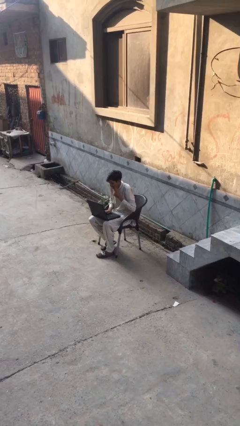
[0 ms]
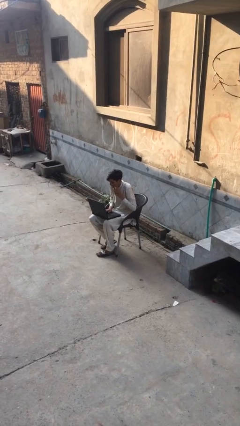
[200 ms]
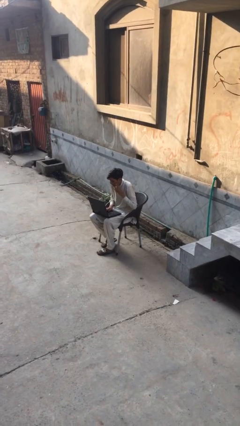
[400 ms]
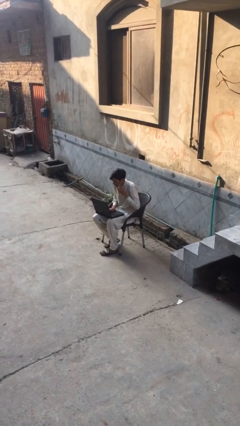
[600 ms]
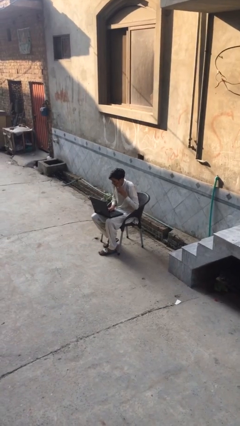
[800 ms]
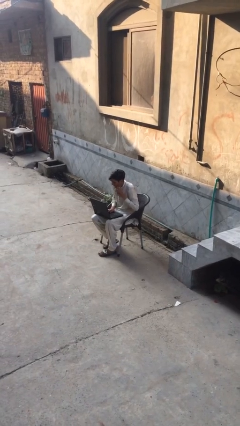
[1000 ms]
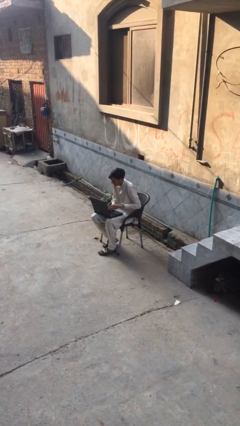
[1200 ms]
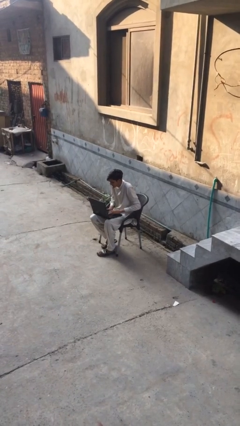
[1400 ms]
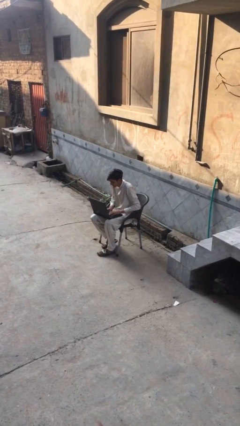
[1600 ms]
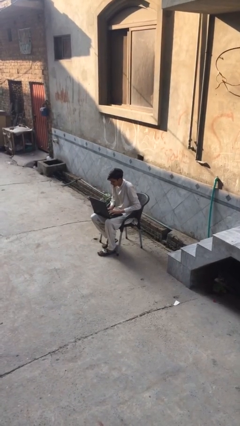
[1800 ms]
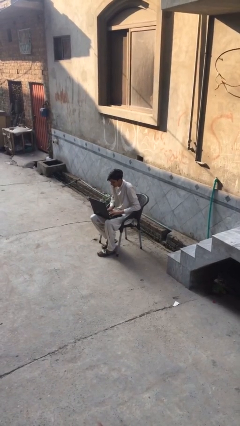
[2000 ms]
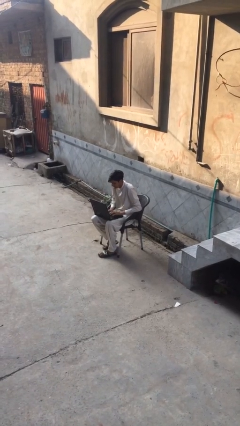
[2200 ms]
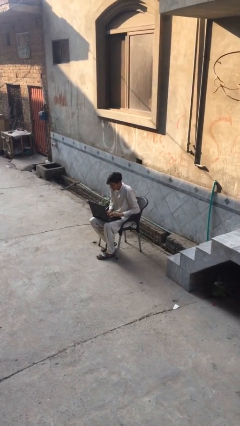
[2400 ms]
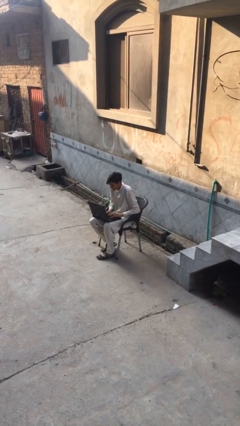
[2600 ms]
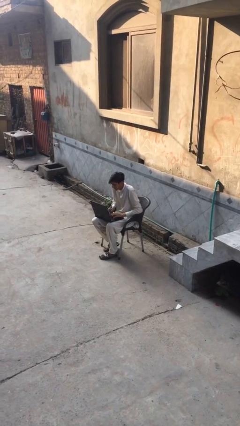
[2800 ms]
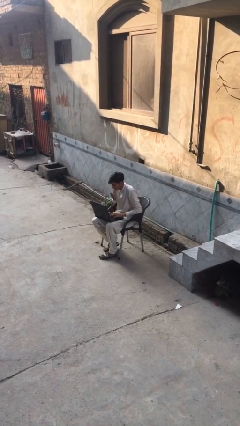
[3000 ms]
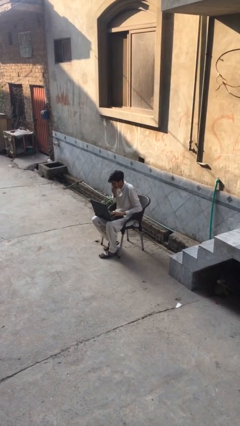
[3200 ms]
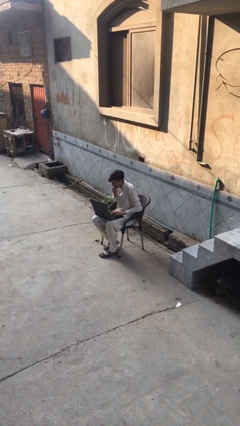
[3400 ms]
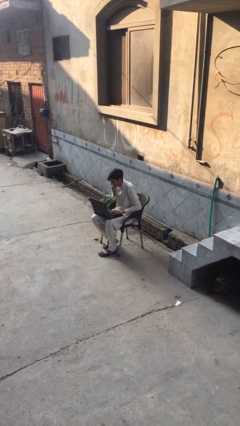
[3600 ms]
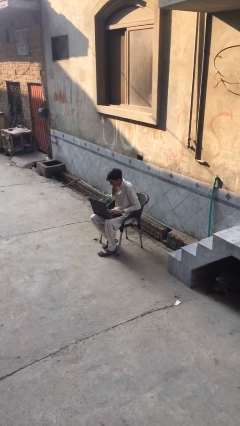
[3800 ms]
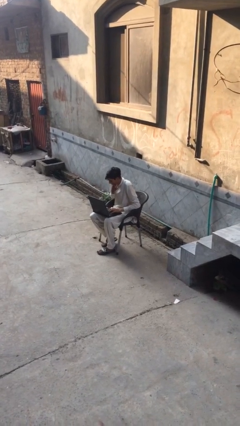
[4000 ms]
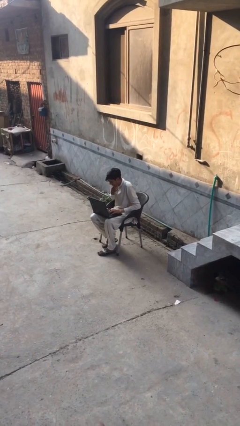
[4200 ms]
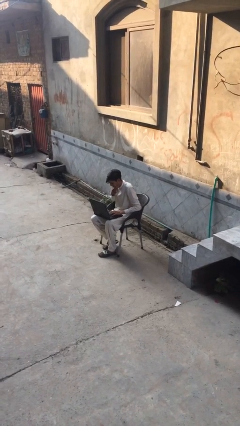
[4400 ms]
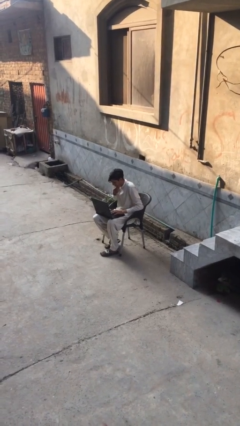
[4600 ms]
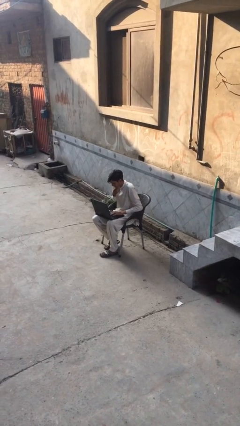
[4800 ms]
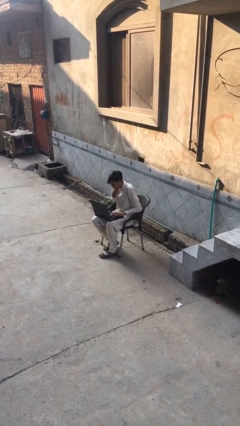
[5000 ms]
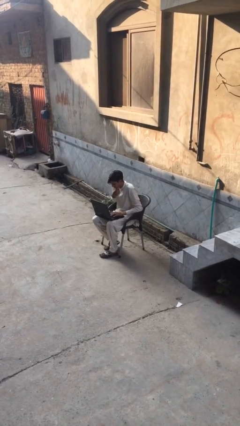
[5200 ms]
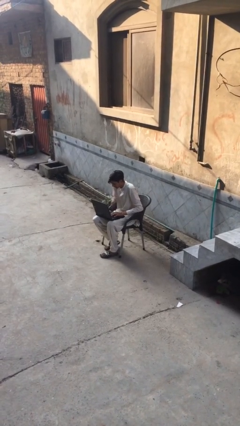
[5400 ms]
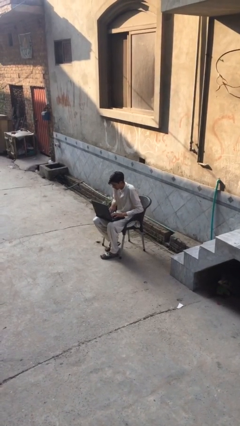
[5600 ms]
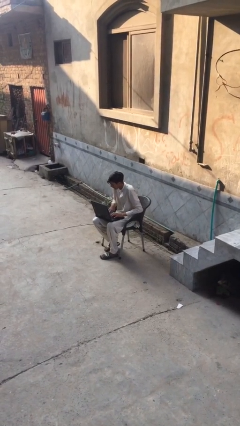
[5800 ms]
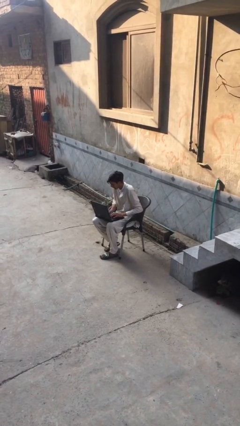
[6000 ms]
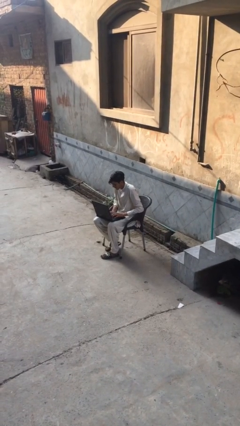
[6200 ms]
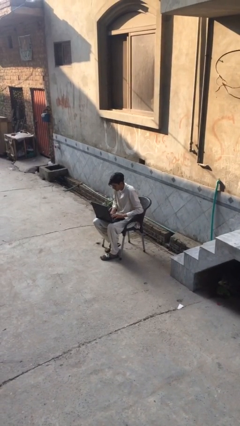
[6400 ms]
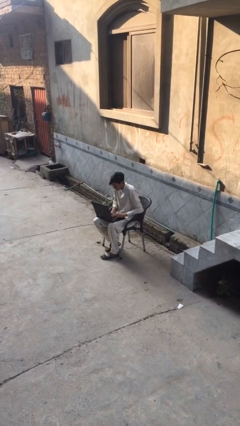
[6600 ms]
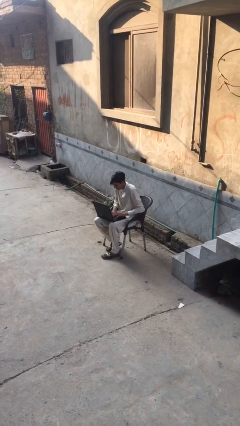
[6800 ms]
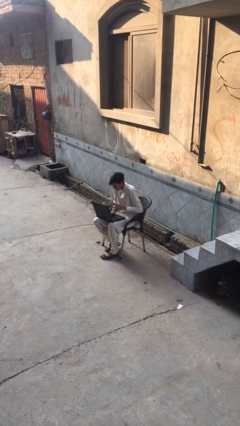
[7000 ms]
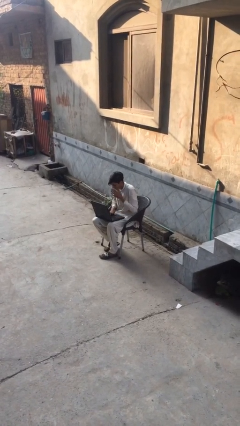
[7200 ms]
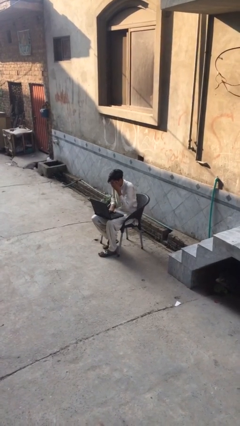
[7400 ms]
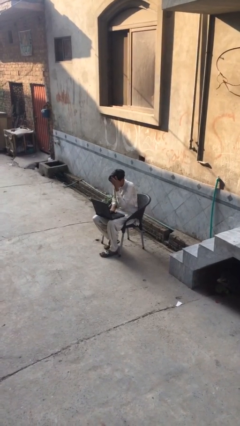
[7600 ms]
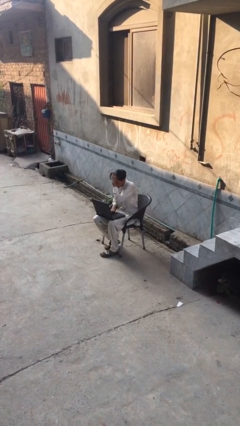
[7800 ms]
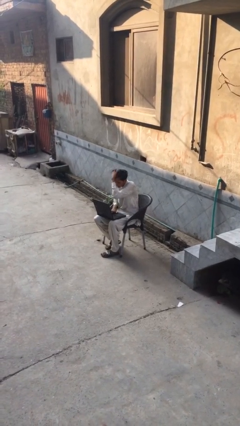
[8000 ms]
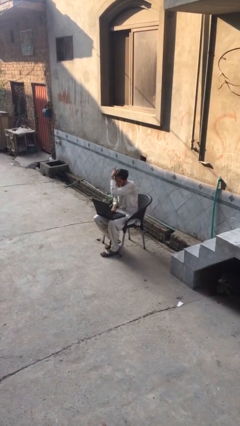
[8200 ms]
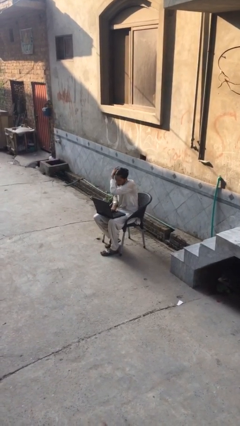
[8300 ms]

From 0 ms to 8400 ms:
person interacts with laptop

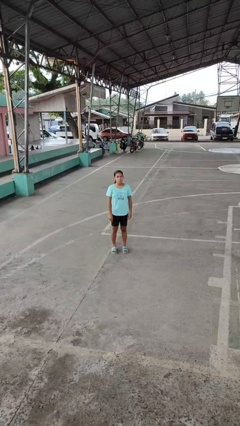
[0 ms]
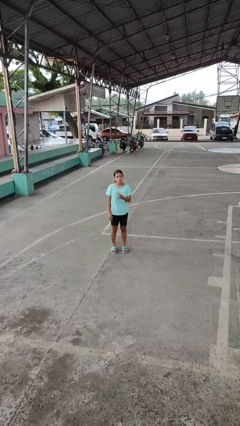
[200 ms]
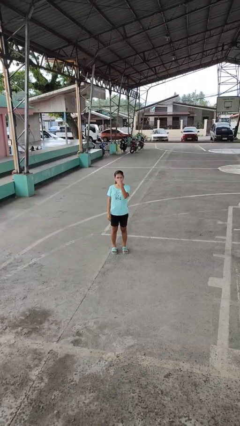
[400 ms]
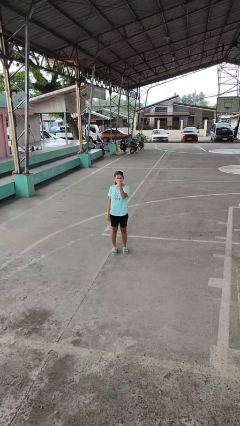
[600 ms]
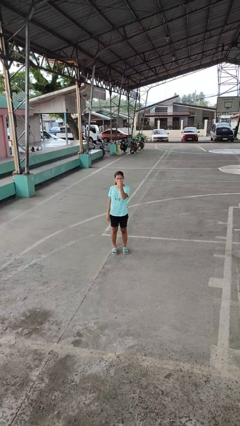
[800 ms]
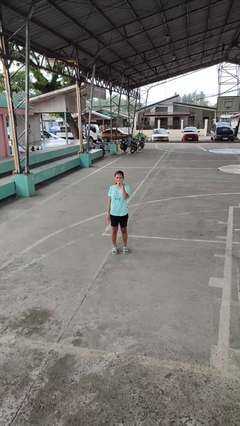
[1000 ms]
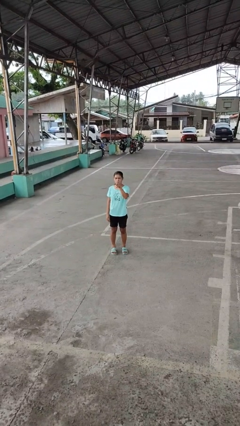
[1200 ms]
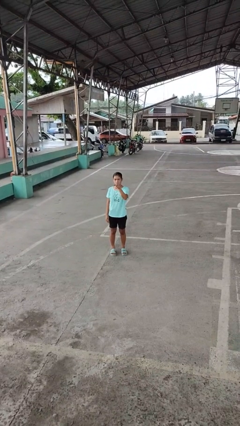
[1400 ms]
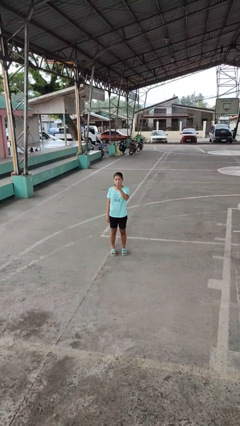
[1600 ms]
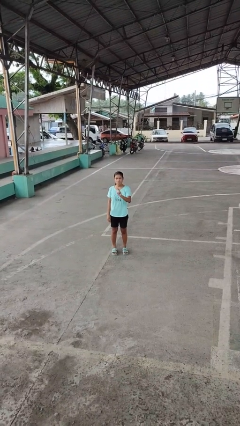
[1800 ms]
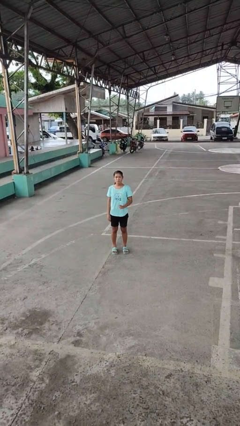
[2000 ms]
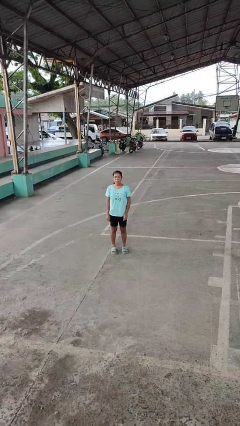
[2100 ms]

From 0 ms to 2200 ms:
person gestures watch closely

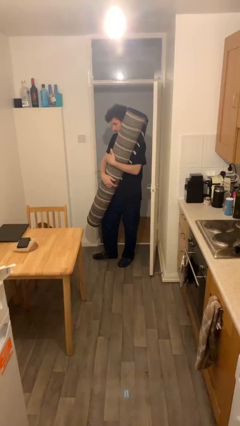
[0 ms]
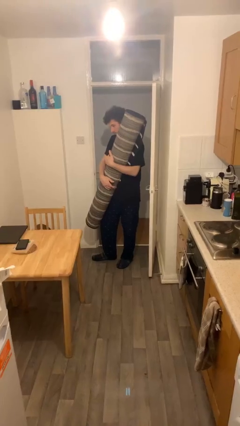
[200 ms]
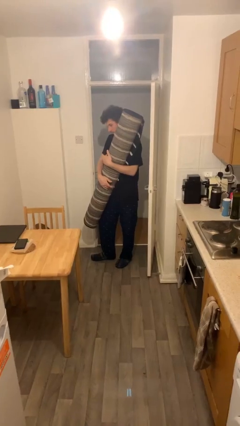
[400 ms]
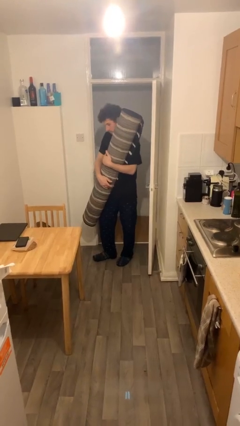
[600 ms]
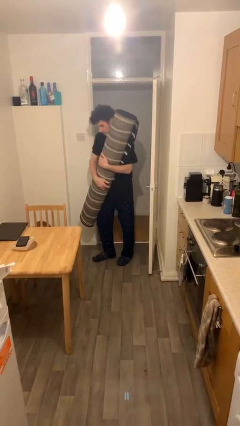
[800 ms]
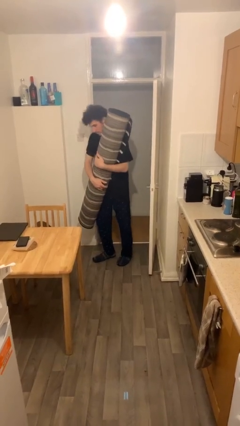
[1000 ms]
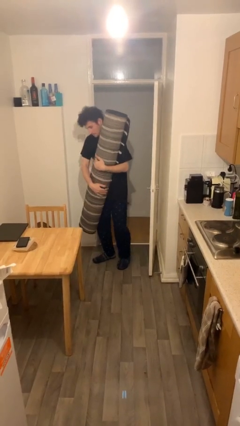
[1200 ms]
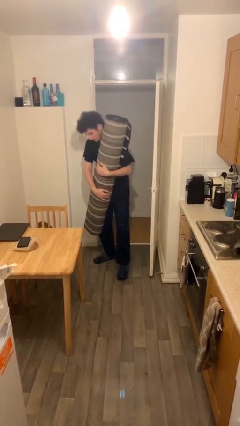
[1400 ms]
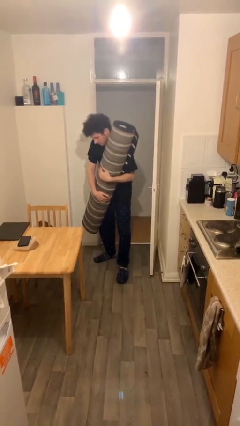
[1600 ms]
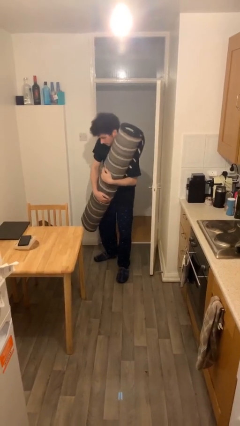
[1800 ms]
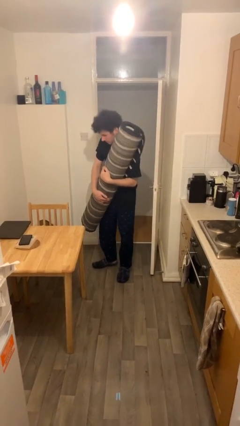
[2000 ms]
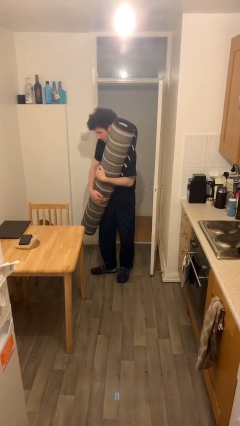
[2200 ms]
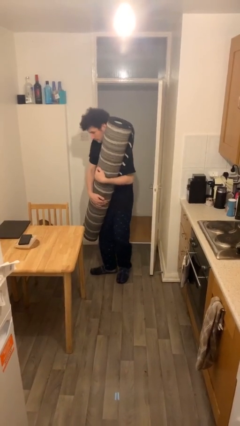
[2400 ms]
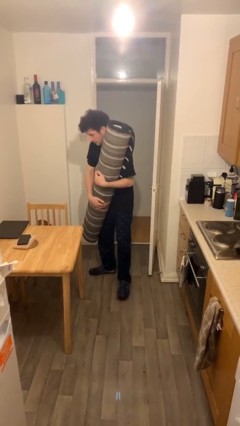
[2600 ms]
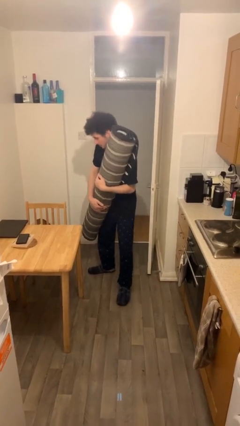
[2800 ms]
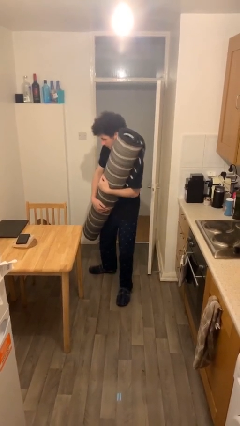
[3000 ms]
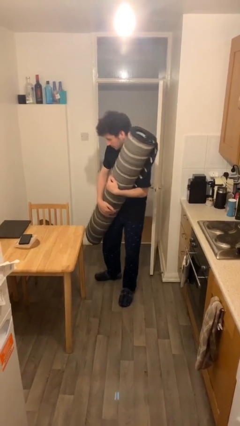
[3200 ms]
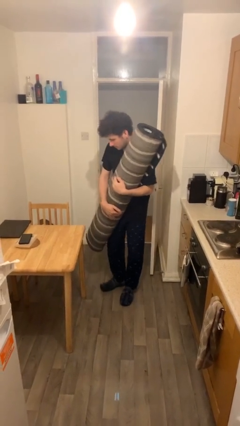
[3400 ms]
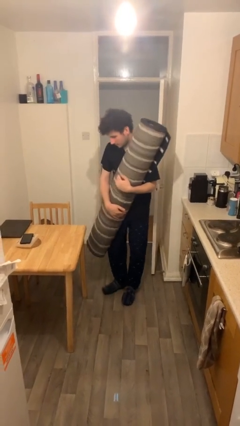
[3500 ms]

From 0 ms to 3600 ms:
person carries heavy object

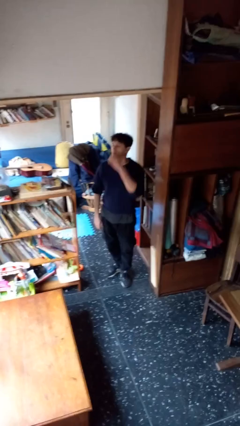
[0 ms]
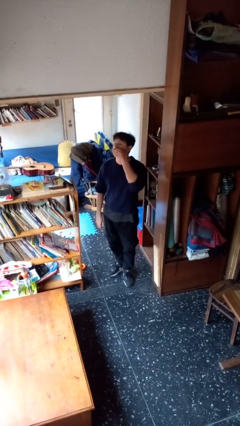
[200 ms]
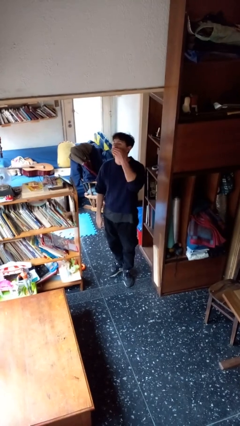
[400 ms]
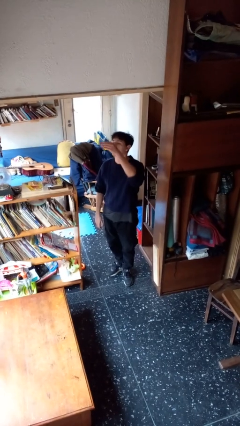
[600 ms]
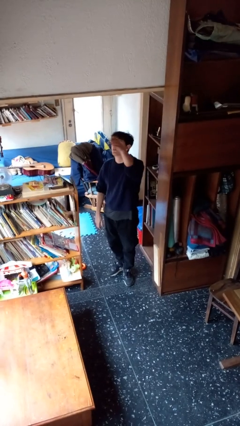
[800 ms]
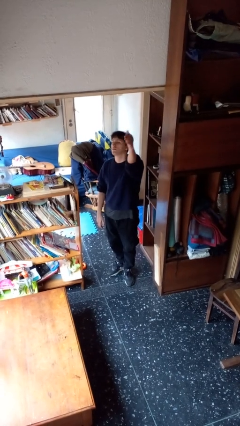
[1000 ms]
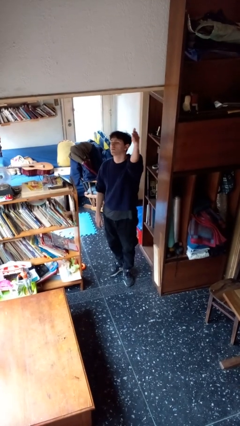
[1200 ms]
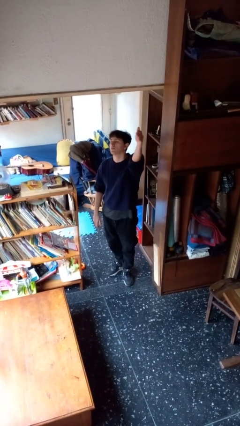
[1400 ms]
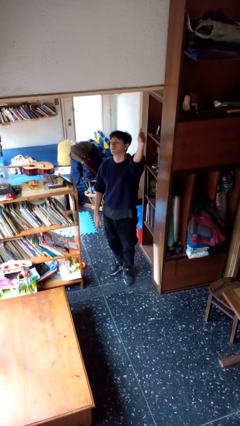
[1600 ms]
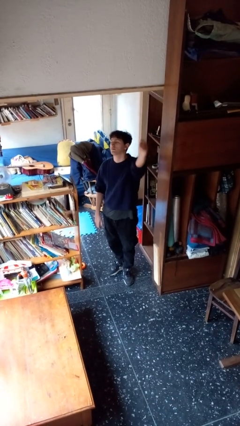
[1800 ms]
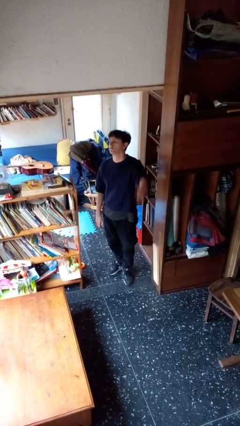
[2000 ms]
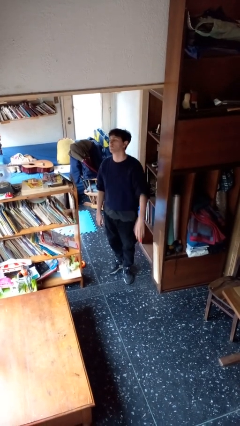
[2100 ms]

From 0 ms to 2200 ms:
person gestures blow kiss

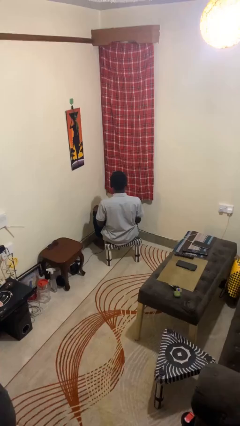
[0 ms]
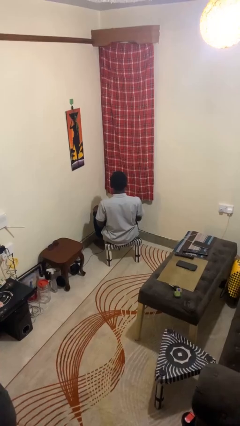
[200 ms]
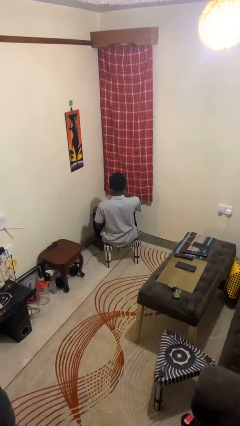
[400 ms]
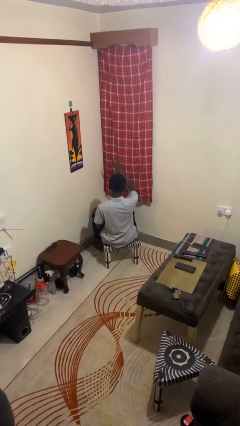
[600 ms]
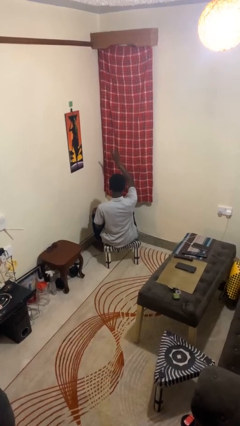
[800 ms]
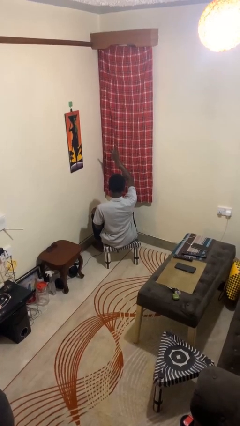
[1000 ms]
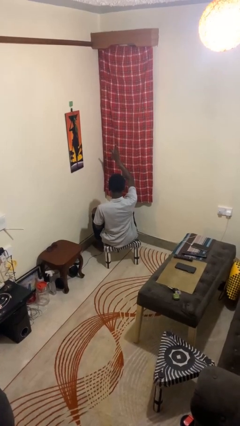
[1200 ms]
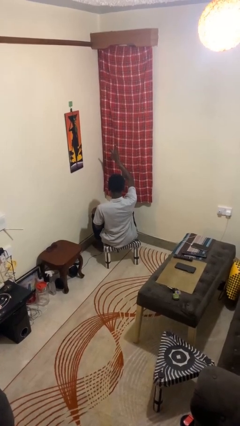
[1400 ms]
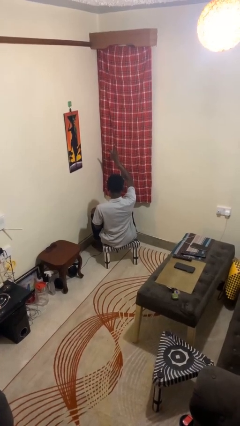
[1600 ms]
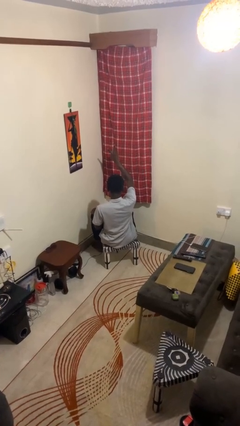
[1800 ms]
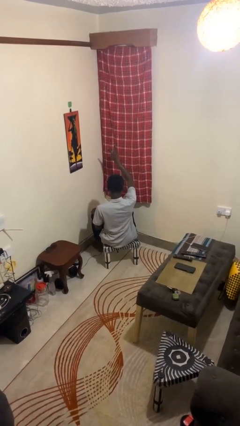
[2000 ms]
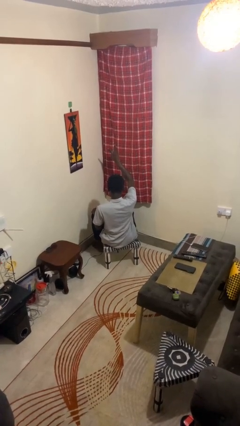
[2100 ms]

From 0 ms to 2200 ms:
person gestures peace
